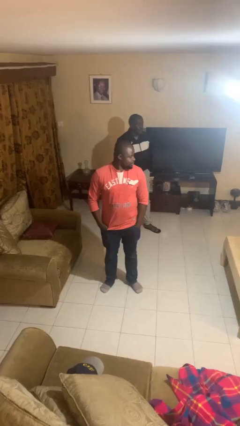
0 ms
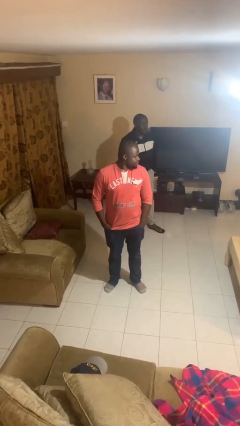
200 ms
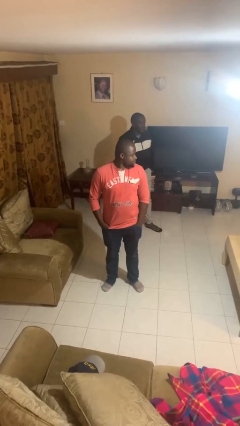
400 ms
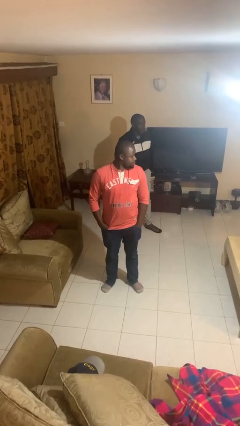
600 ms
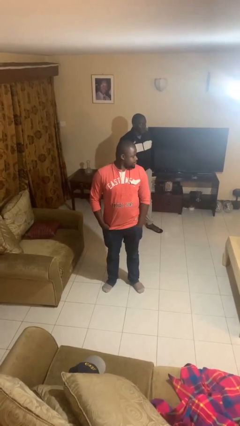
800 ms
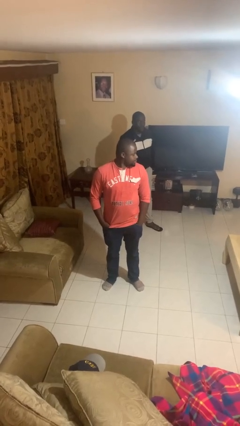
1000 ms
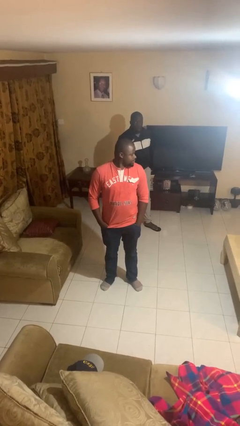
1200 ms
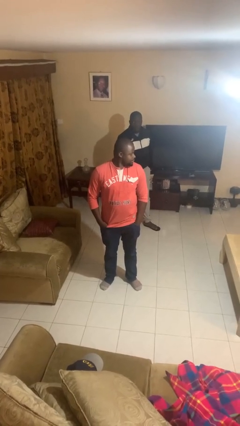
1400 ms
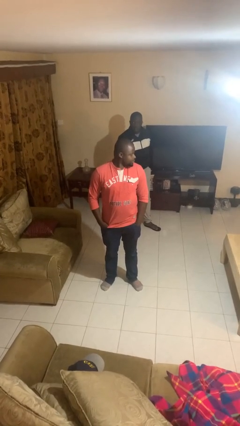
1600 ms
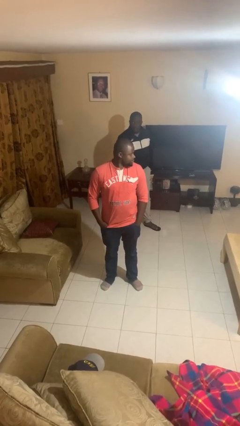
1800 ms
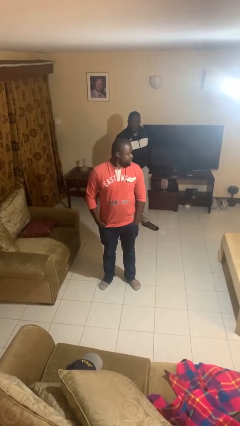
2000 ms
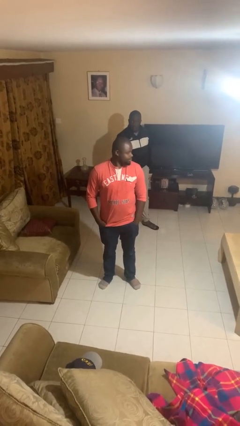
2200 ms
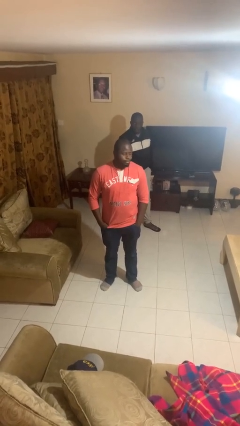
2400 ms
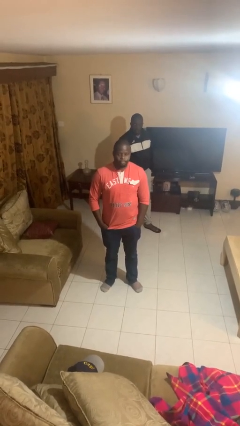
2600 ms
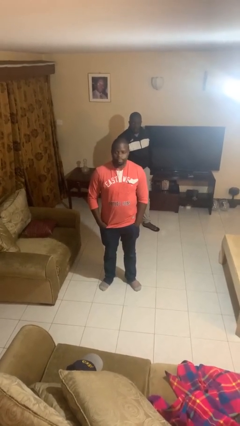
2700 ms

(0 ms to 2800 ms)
person looks over shoulder

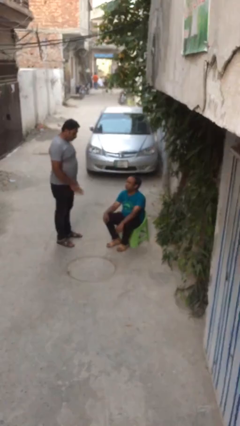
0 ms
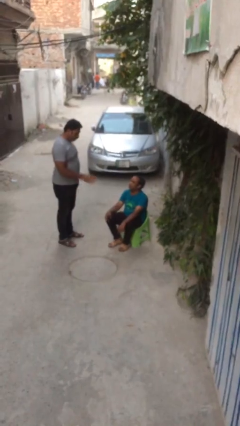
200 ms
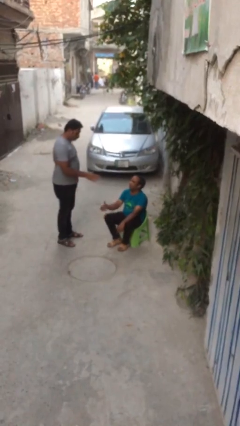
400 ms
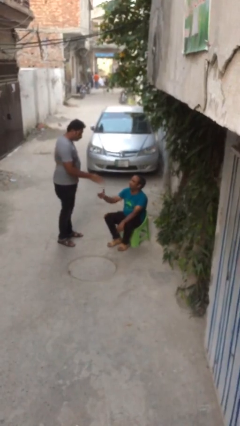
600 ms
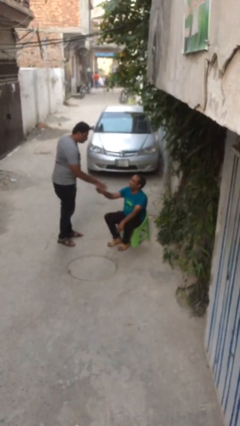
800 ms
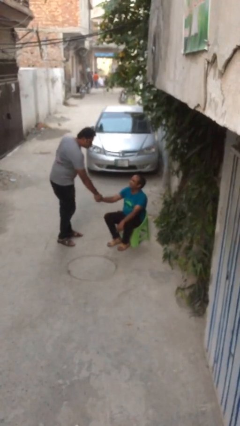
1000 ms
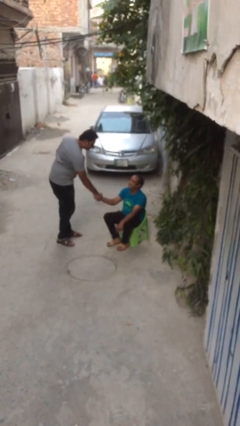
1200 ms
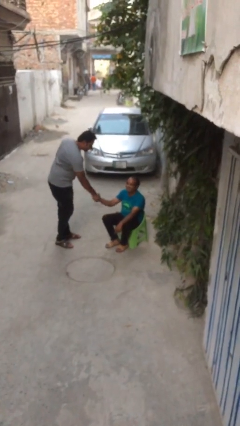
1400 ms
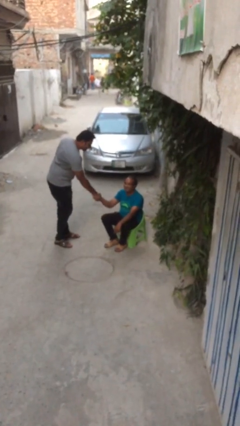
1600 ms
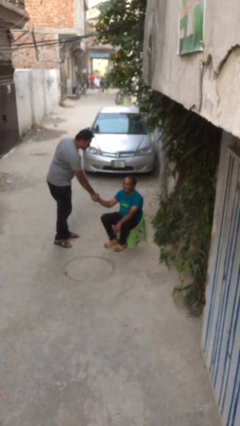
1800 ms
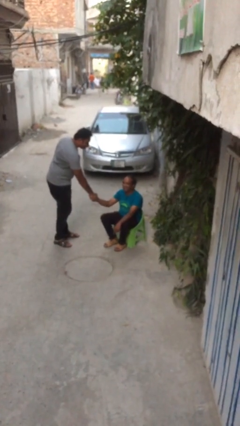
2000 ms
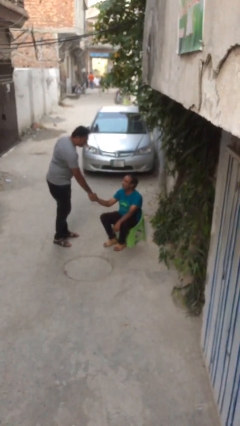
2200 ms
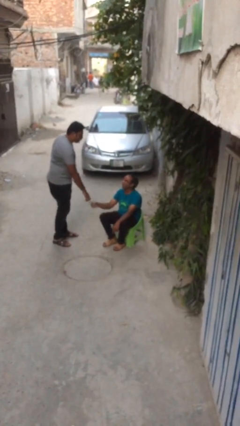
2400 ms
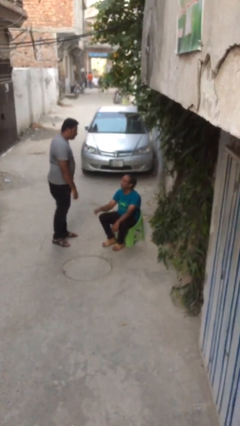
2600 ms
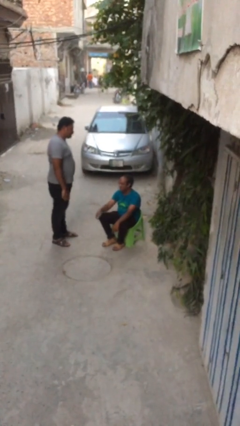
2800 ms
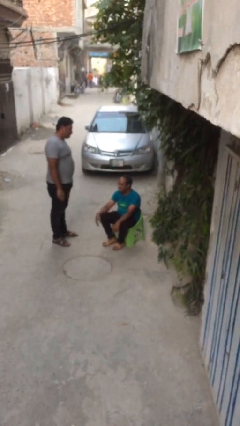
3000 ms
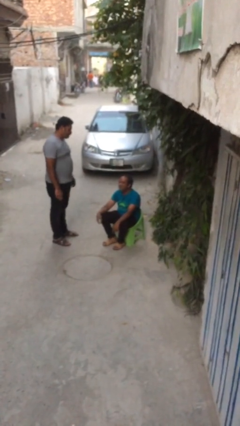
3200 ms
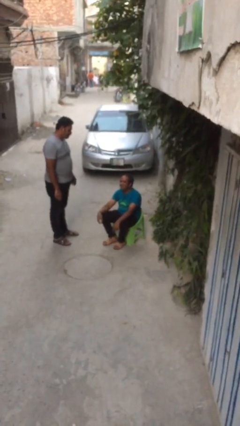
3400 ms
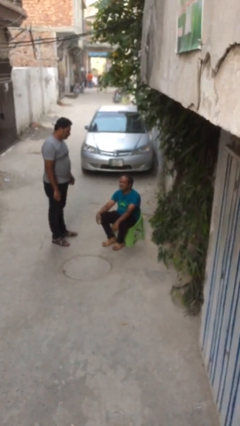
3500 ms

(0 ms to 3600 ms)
person shakes hand

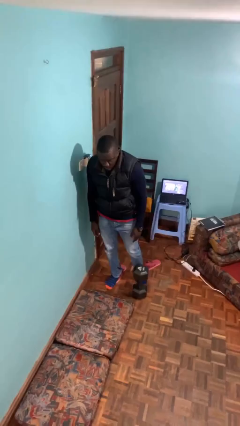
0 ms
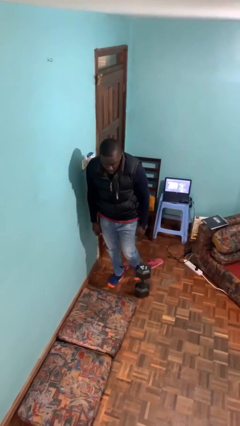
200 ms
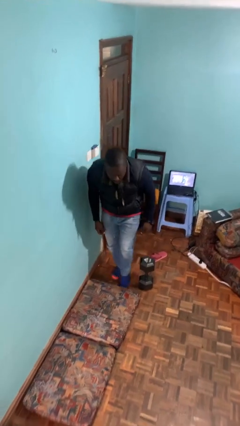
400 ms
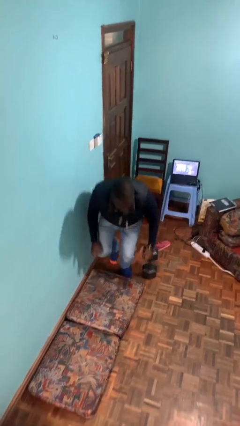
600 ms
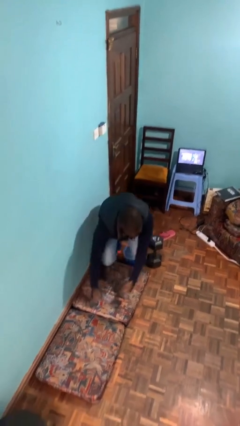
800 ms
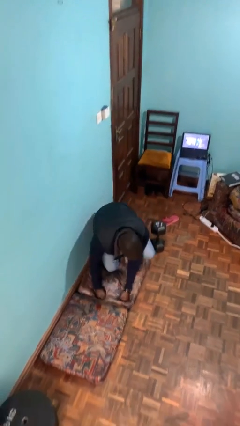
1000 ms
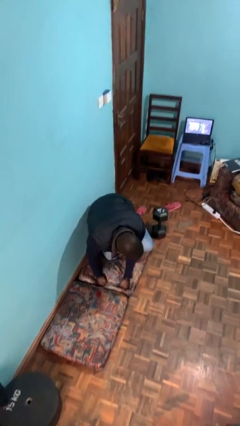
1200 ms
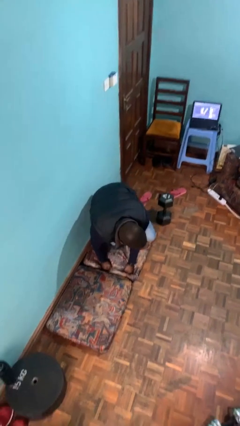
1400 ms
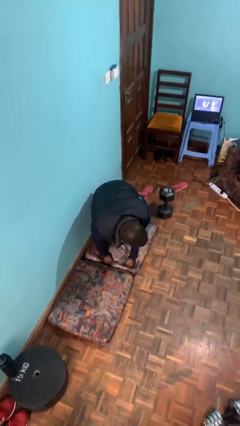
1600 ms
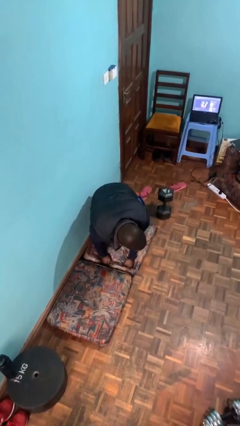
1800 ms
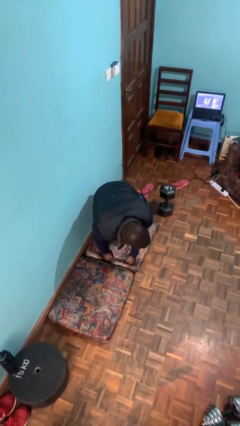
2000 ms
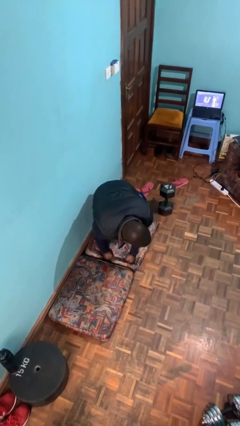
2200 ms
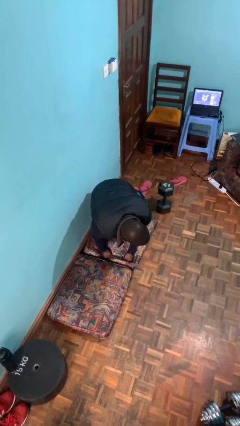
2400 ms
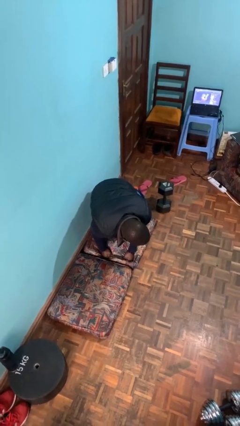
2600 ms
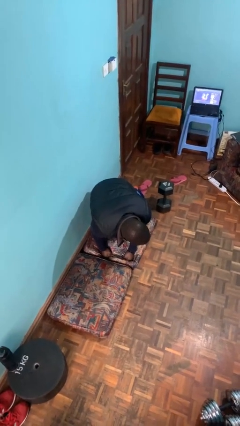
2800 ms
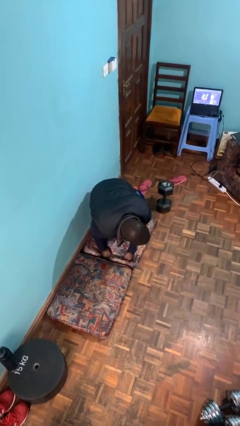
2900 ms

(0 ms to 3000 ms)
person trips on object on floor

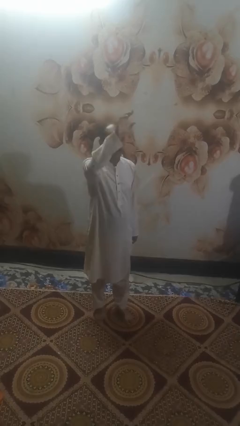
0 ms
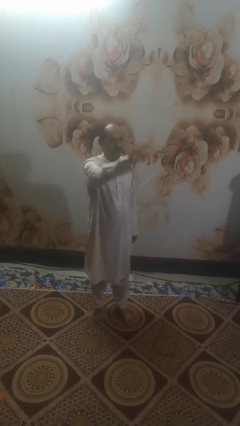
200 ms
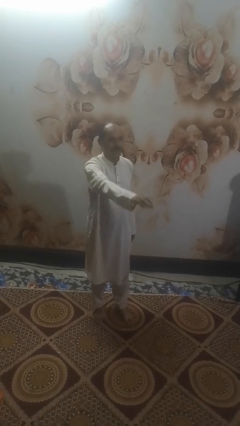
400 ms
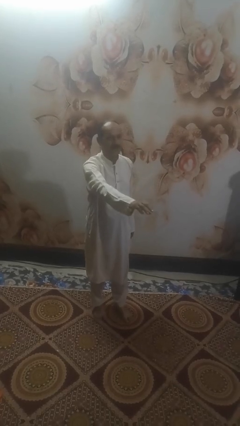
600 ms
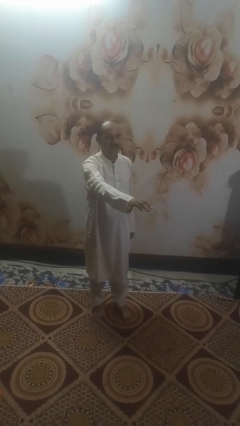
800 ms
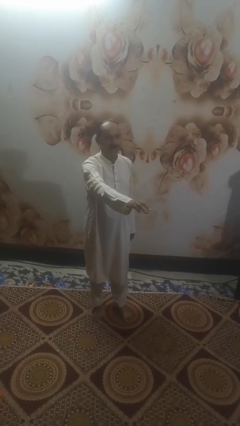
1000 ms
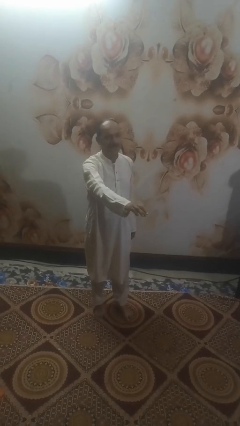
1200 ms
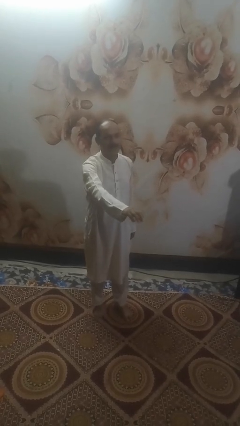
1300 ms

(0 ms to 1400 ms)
person gestures swipe down

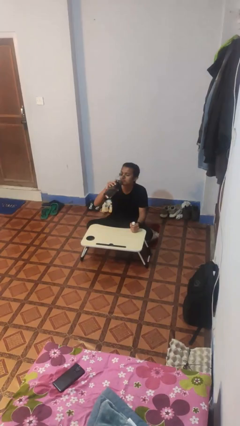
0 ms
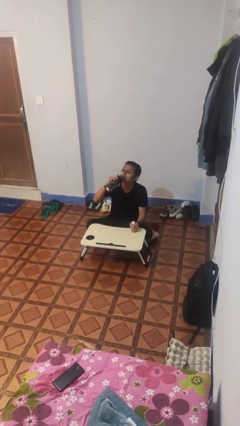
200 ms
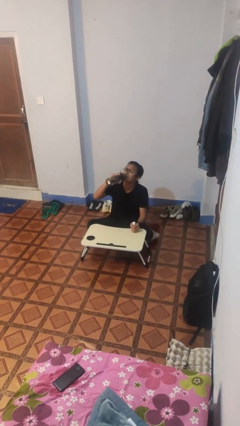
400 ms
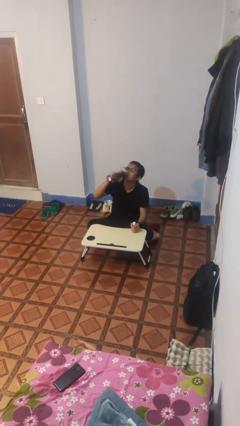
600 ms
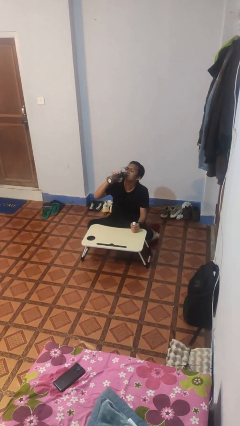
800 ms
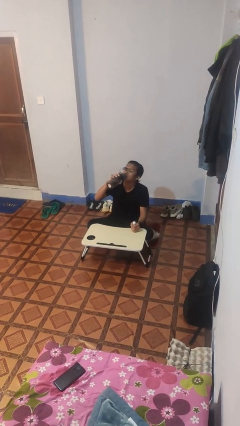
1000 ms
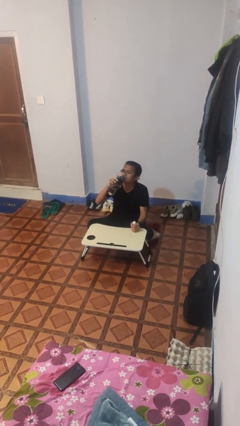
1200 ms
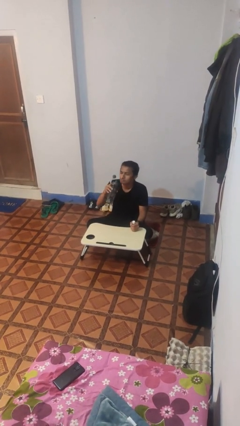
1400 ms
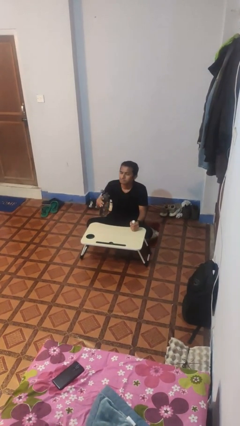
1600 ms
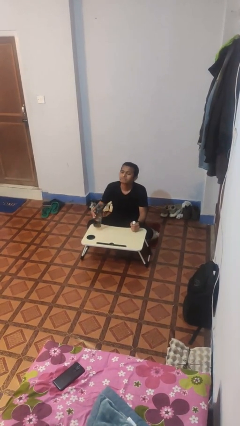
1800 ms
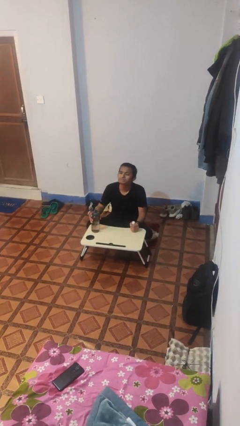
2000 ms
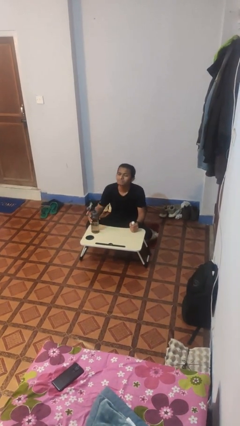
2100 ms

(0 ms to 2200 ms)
person drinks from cup

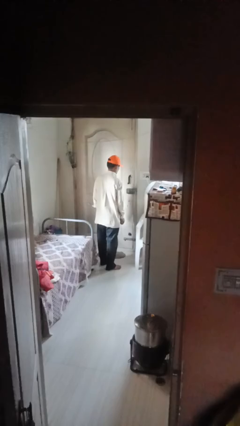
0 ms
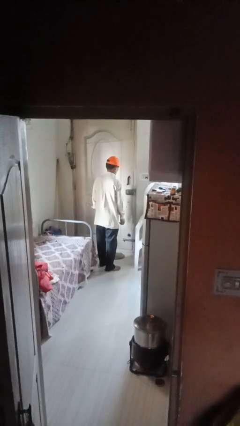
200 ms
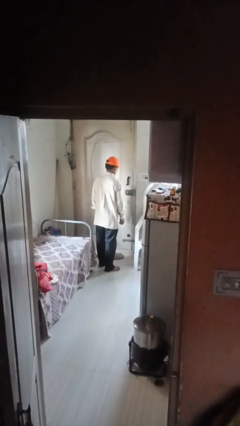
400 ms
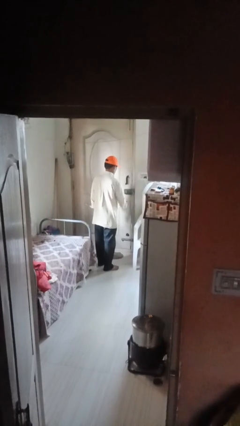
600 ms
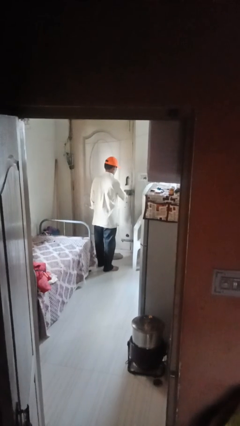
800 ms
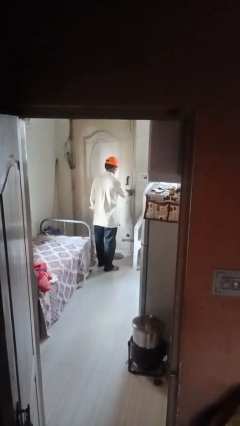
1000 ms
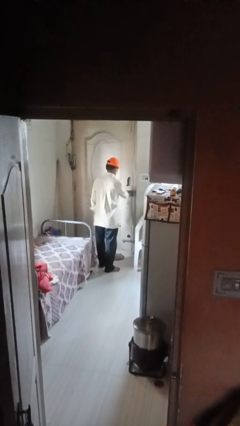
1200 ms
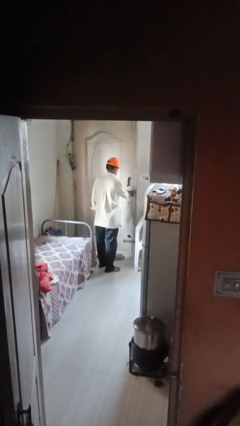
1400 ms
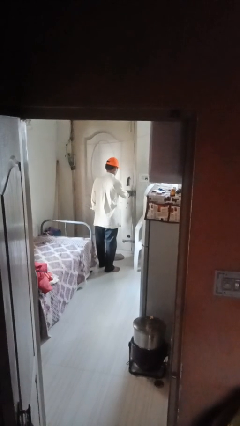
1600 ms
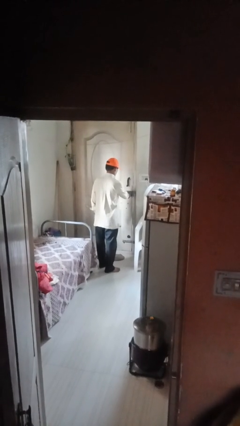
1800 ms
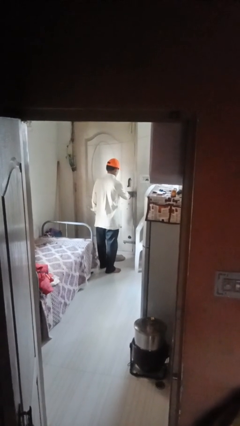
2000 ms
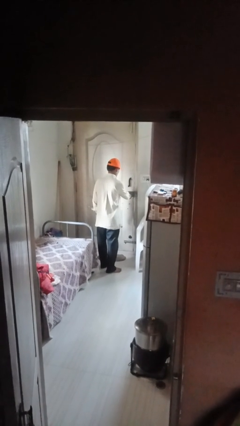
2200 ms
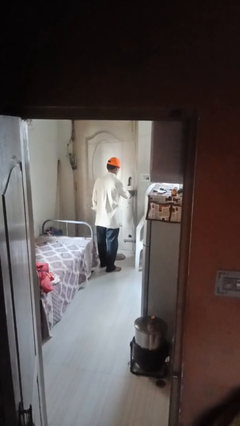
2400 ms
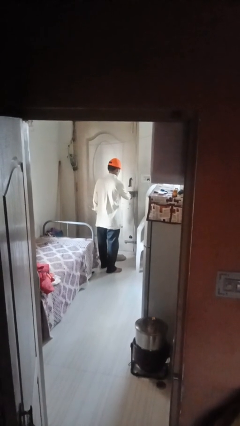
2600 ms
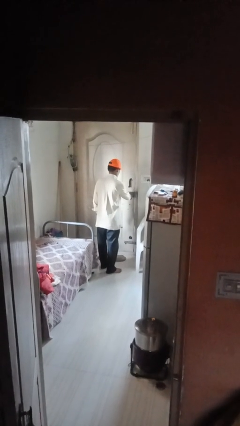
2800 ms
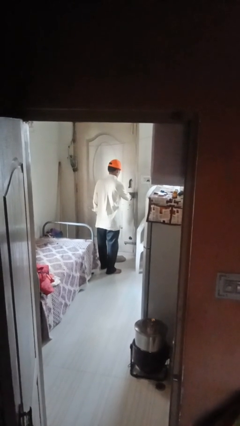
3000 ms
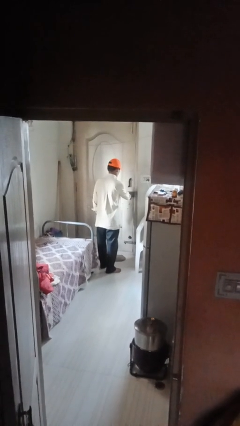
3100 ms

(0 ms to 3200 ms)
person unlocks door with keys

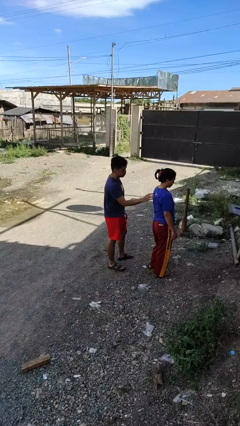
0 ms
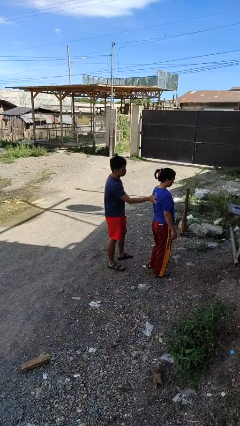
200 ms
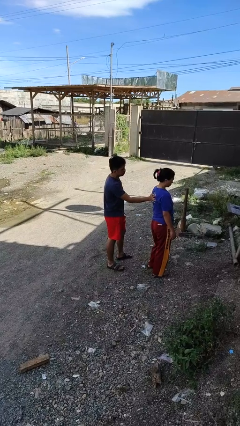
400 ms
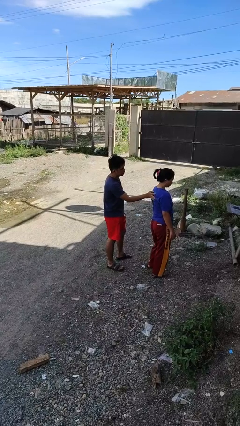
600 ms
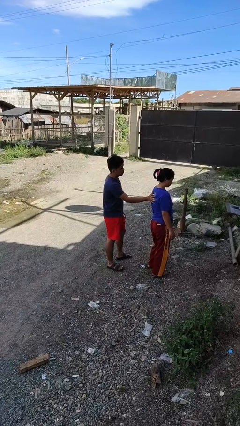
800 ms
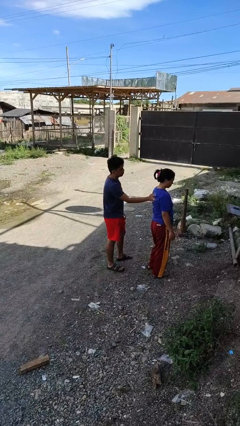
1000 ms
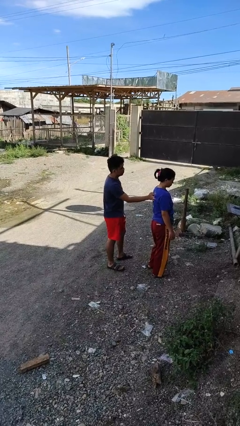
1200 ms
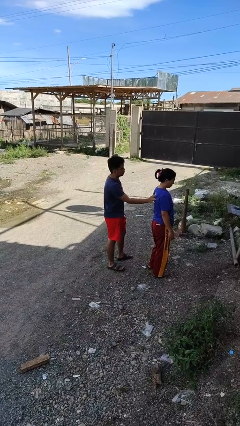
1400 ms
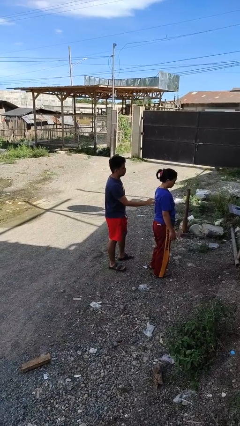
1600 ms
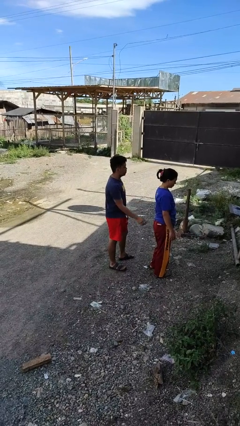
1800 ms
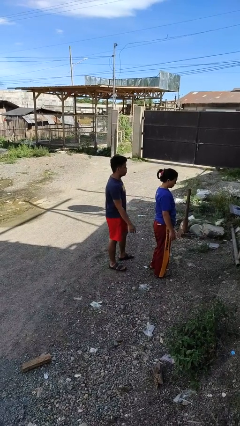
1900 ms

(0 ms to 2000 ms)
person touches back of person
